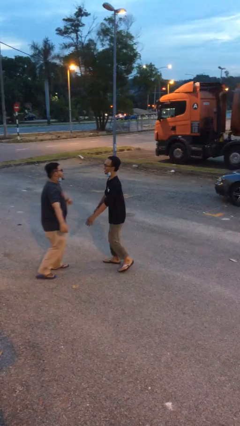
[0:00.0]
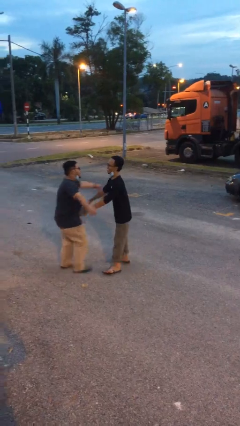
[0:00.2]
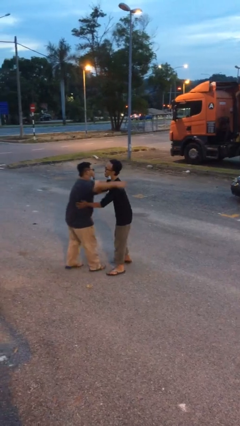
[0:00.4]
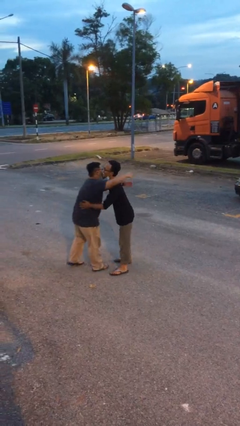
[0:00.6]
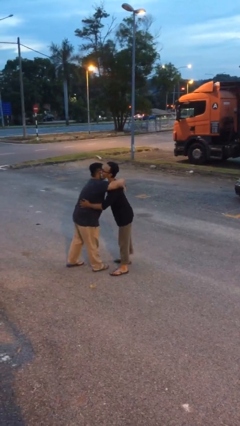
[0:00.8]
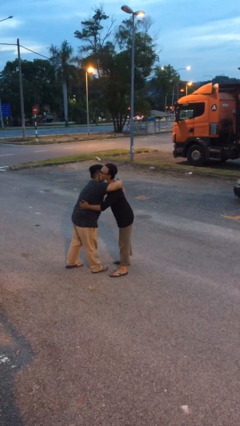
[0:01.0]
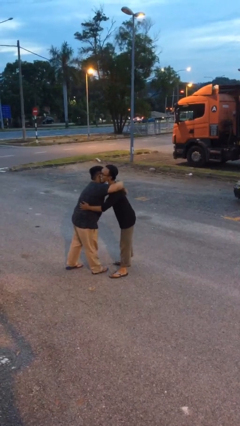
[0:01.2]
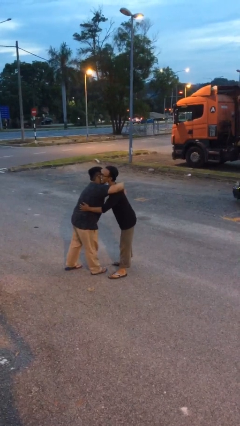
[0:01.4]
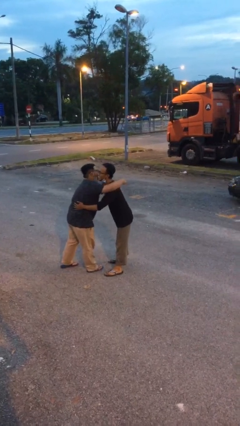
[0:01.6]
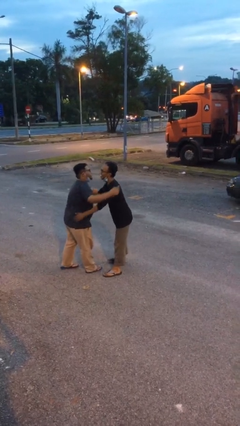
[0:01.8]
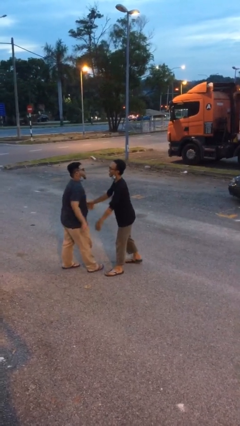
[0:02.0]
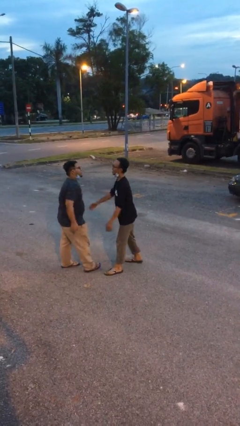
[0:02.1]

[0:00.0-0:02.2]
person embraces person

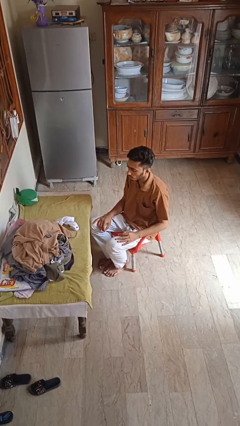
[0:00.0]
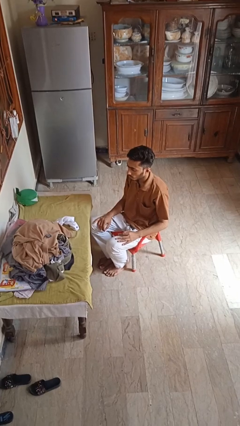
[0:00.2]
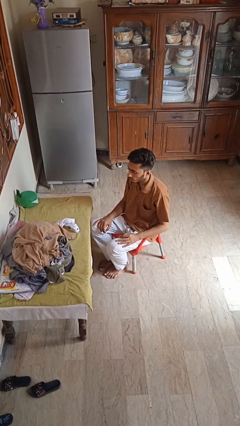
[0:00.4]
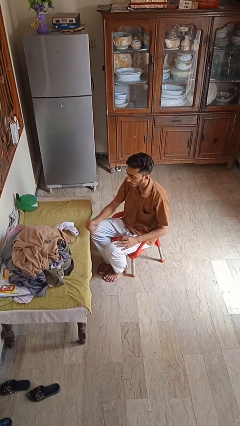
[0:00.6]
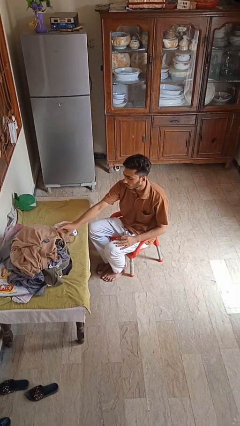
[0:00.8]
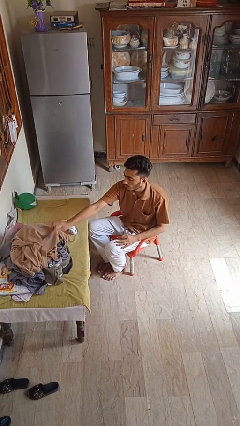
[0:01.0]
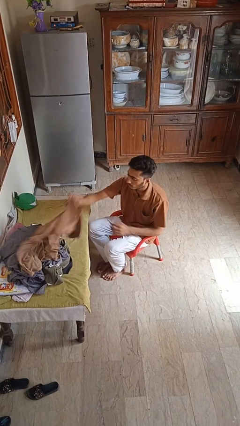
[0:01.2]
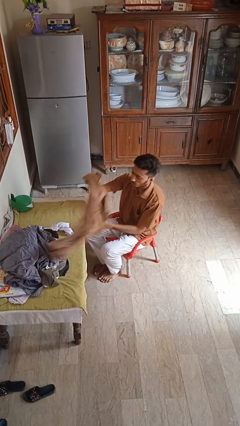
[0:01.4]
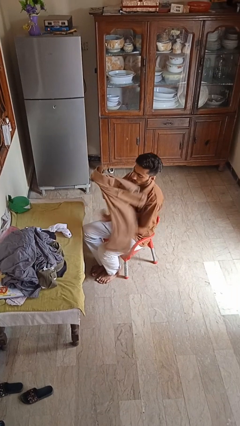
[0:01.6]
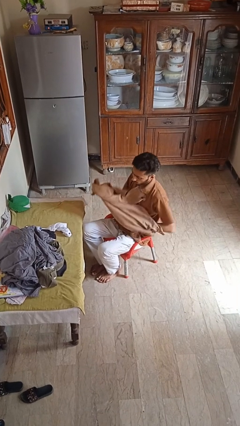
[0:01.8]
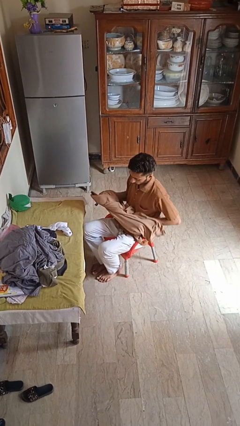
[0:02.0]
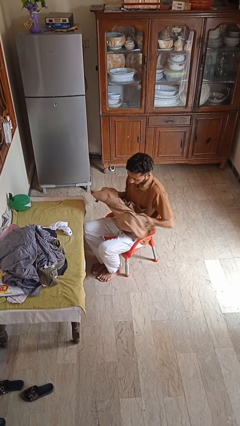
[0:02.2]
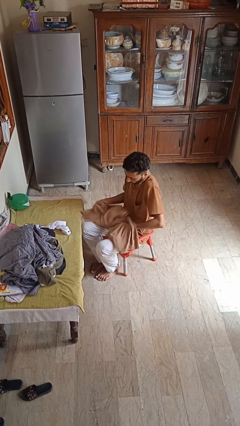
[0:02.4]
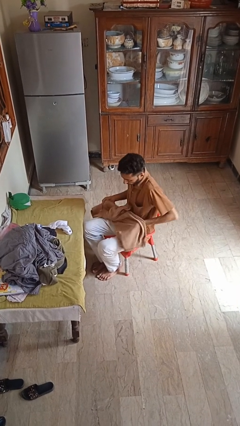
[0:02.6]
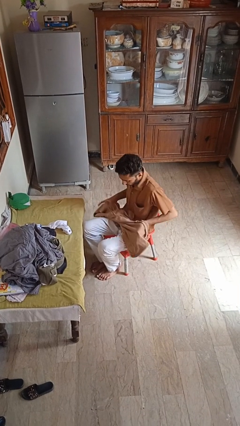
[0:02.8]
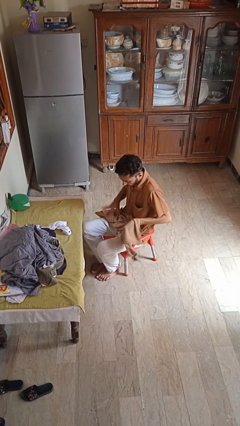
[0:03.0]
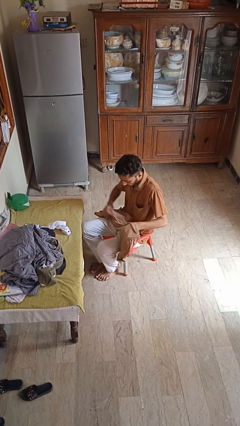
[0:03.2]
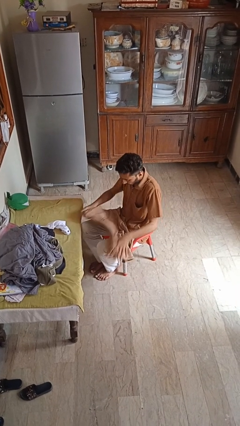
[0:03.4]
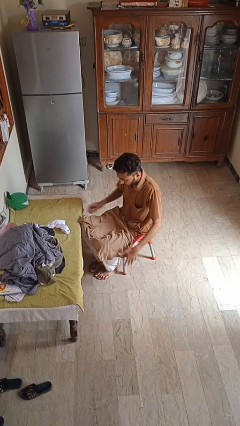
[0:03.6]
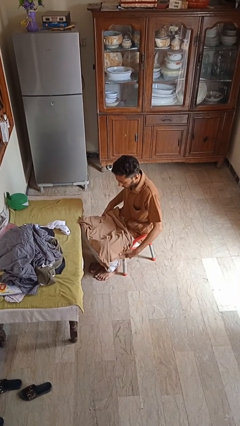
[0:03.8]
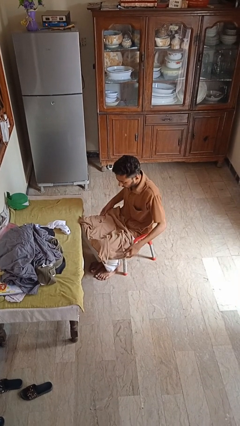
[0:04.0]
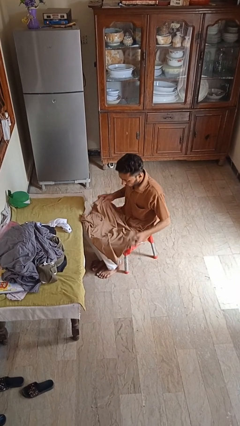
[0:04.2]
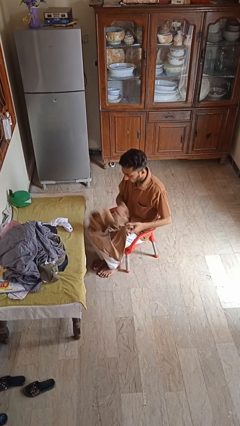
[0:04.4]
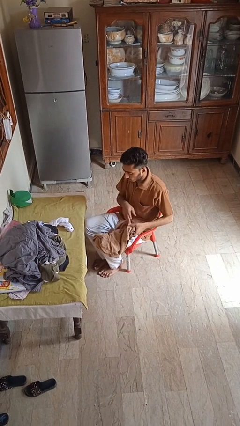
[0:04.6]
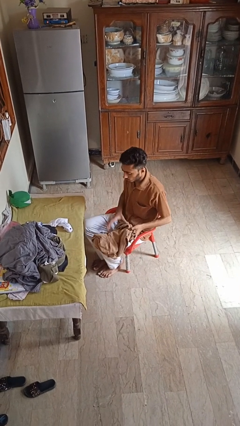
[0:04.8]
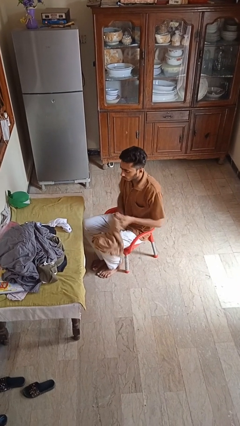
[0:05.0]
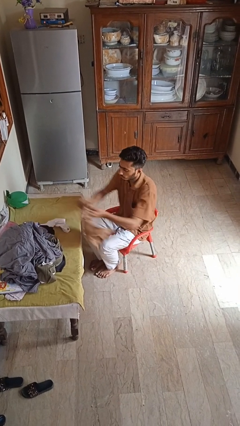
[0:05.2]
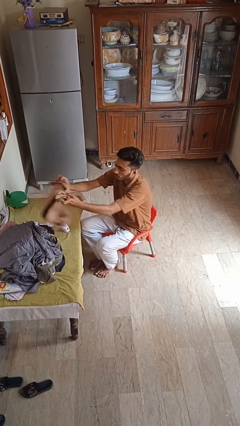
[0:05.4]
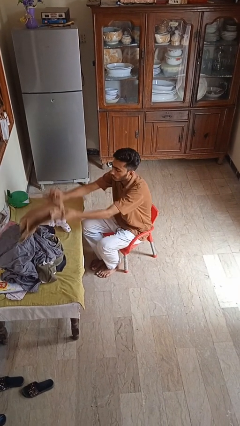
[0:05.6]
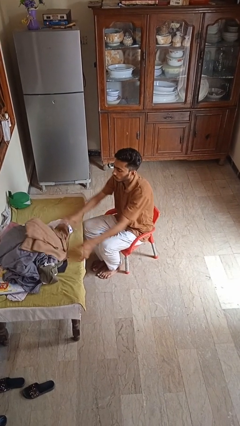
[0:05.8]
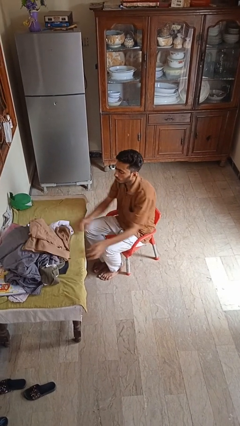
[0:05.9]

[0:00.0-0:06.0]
person folds shirt

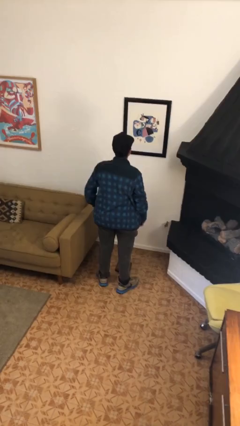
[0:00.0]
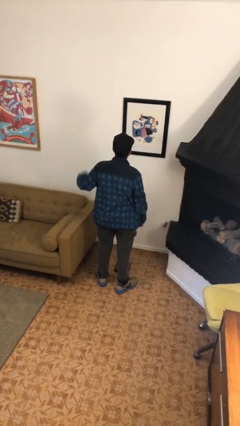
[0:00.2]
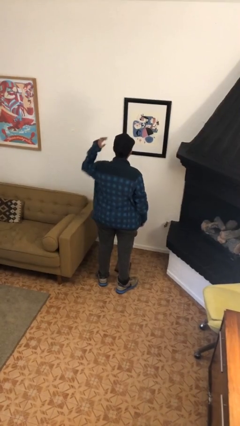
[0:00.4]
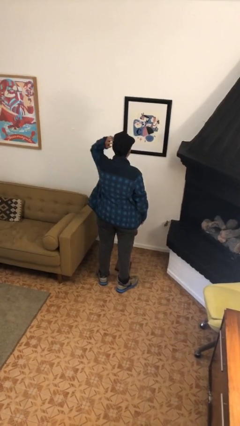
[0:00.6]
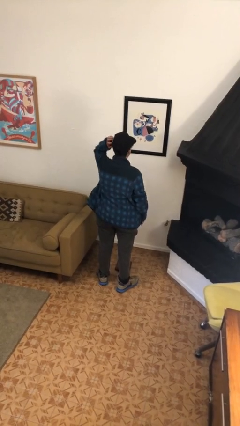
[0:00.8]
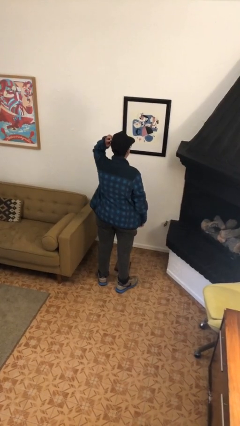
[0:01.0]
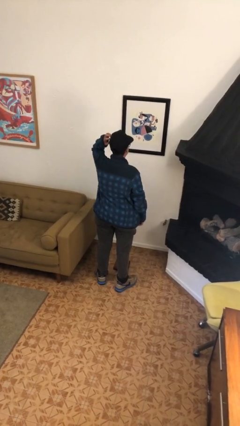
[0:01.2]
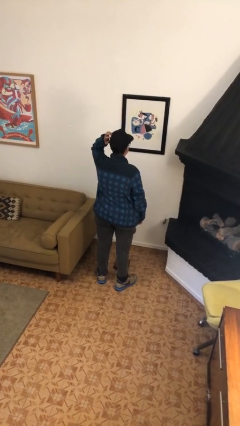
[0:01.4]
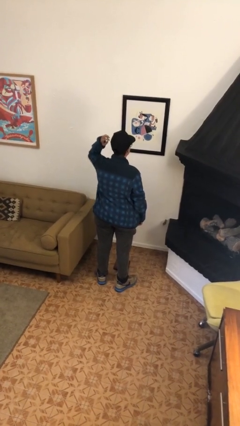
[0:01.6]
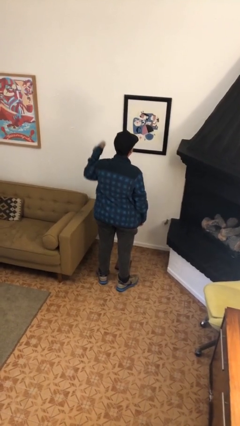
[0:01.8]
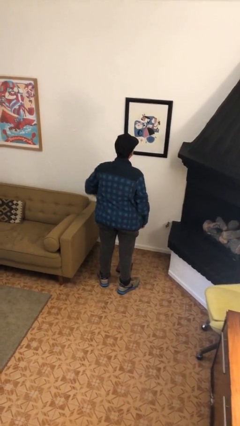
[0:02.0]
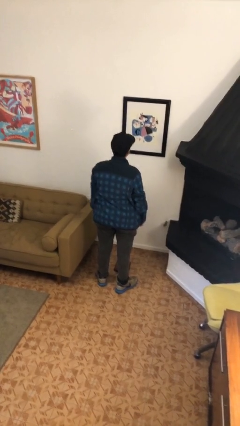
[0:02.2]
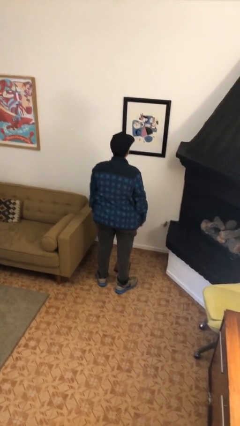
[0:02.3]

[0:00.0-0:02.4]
person scratches face

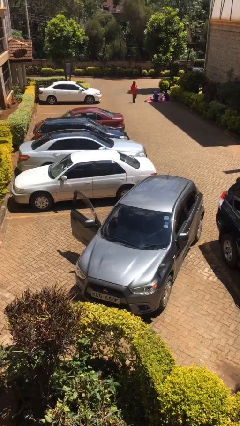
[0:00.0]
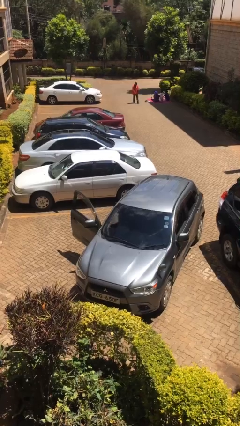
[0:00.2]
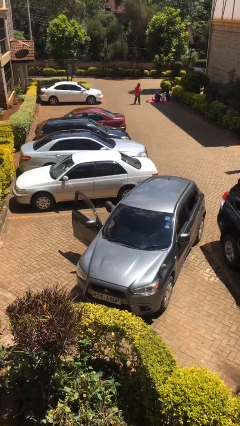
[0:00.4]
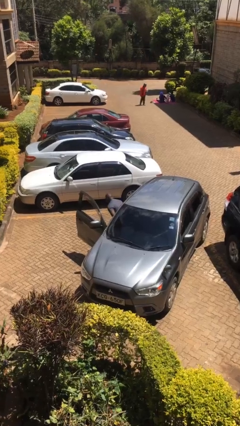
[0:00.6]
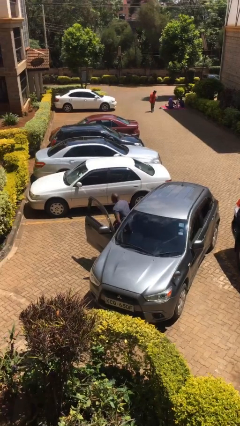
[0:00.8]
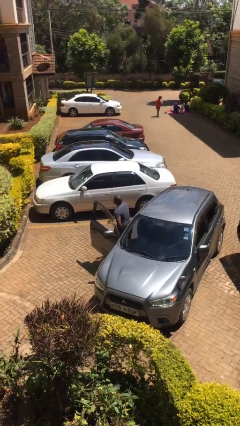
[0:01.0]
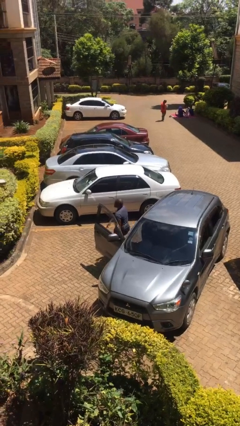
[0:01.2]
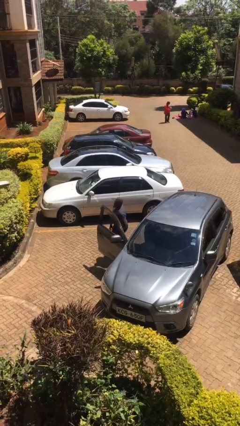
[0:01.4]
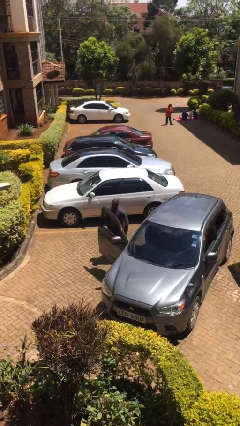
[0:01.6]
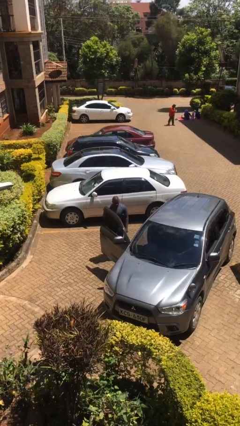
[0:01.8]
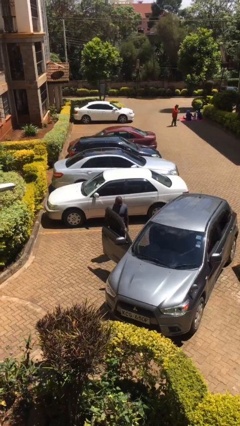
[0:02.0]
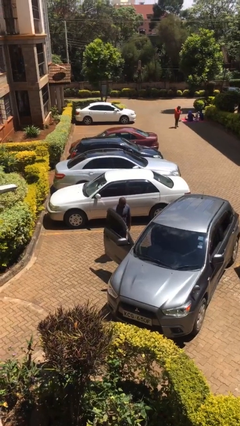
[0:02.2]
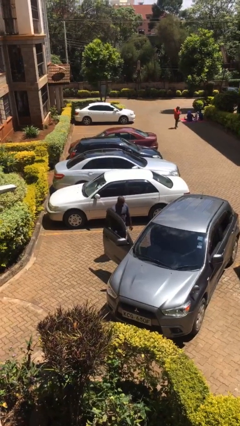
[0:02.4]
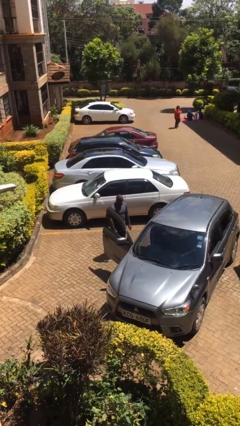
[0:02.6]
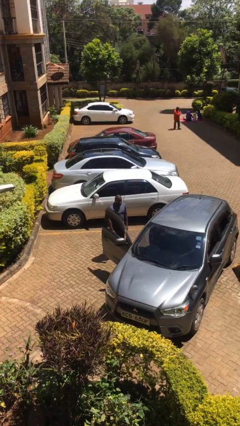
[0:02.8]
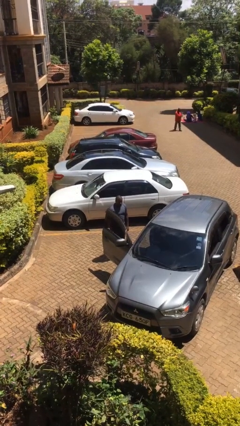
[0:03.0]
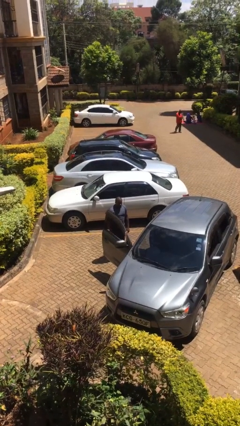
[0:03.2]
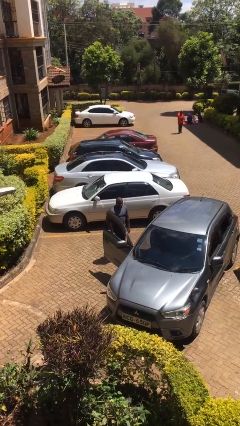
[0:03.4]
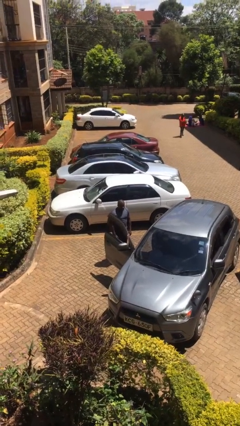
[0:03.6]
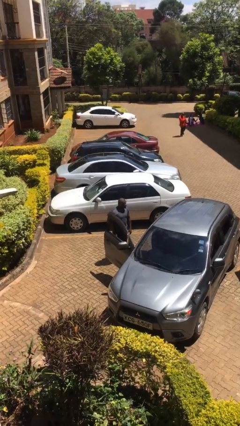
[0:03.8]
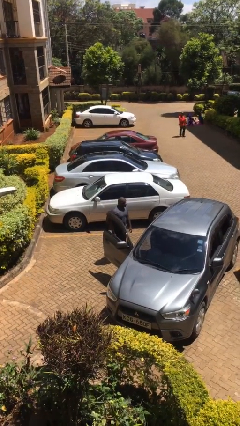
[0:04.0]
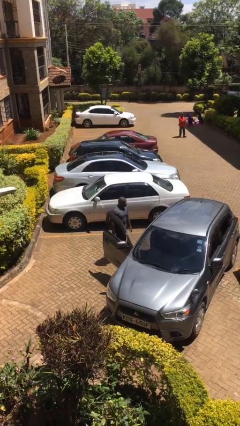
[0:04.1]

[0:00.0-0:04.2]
person exits car

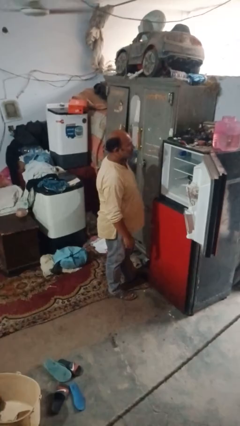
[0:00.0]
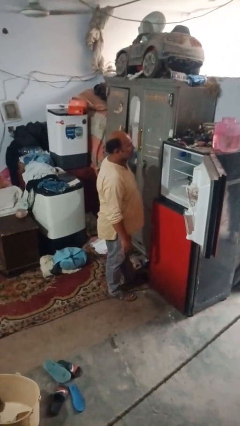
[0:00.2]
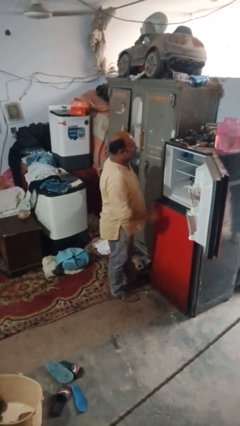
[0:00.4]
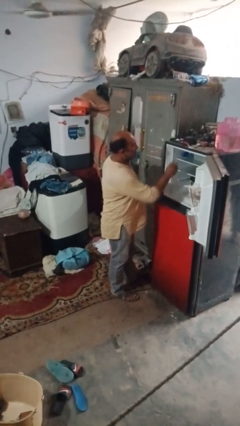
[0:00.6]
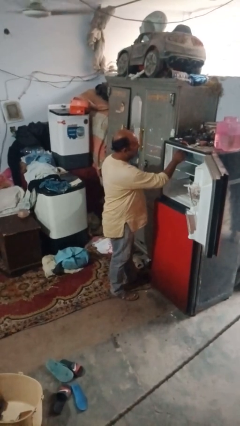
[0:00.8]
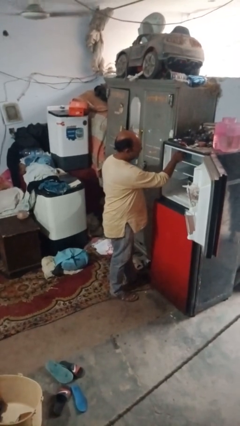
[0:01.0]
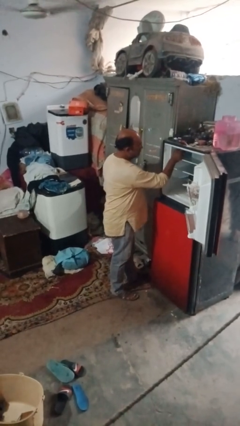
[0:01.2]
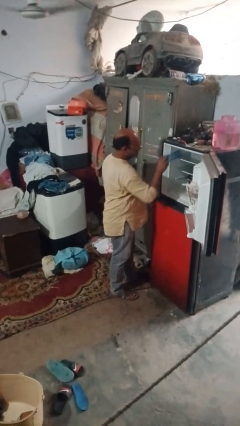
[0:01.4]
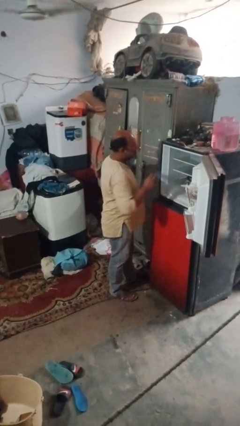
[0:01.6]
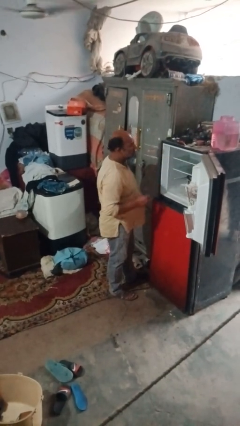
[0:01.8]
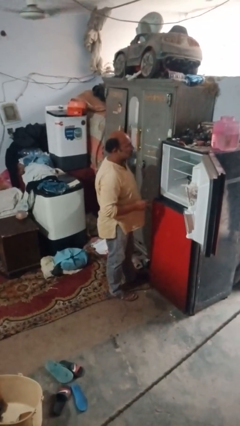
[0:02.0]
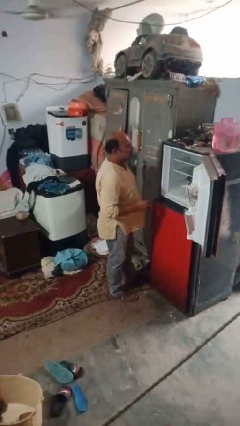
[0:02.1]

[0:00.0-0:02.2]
person takes object from refrigerator

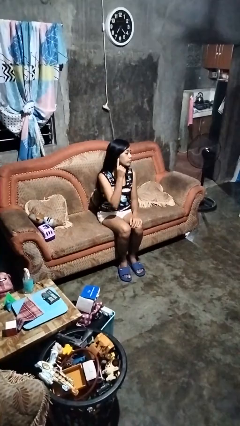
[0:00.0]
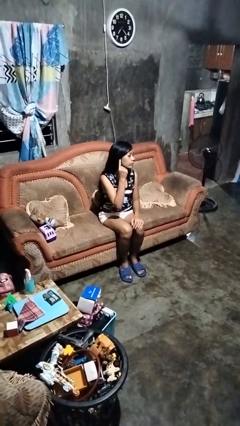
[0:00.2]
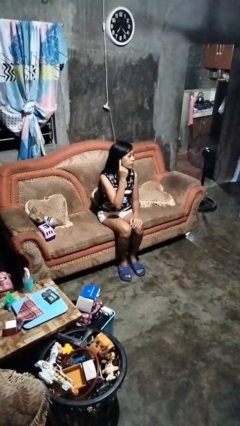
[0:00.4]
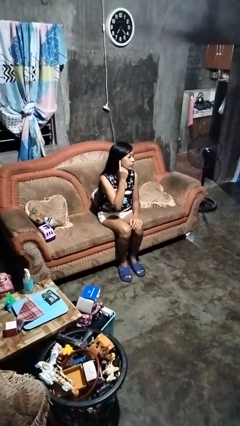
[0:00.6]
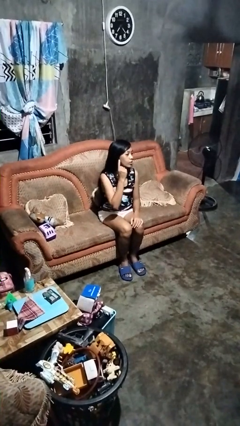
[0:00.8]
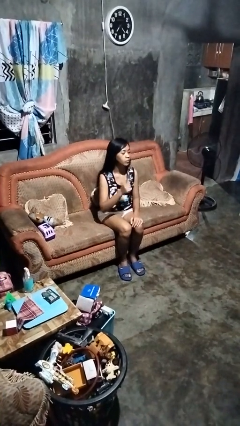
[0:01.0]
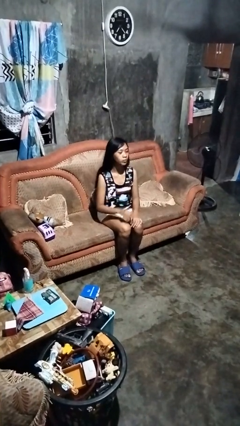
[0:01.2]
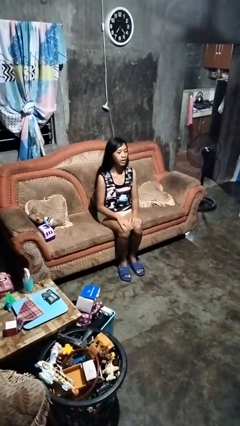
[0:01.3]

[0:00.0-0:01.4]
person gestures listen closely
